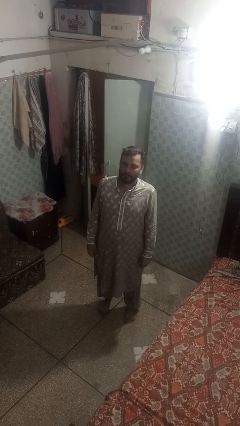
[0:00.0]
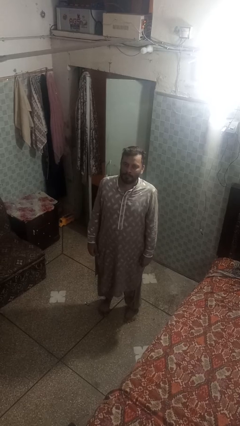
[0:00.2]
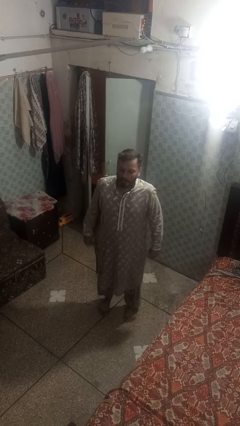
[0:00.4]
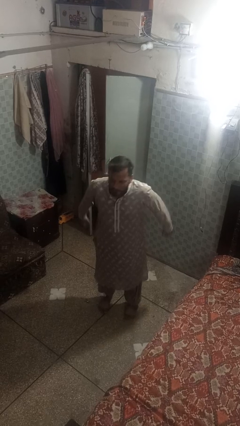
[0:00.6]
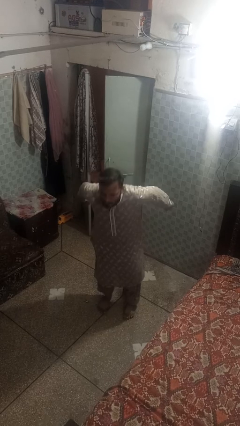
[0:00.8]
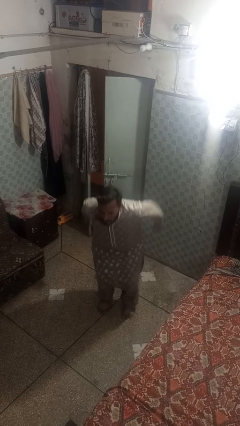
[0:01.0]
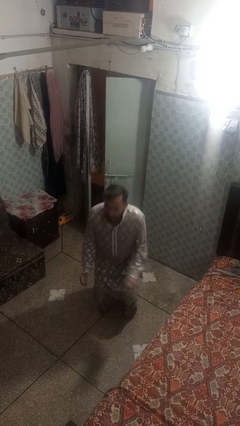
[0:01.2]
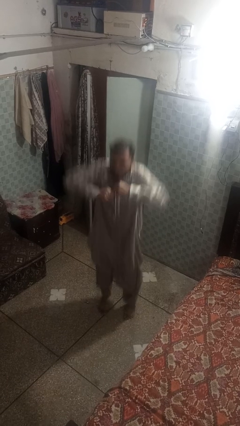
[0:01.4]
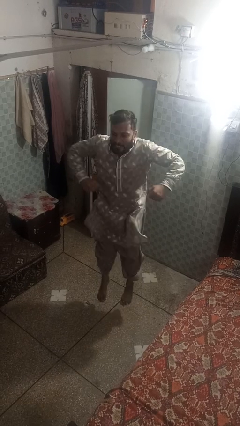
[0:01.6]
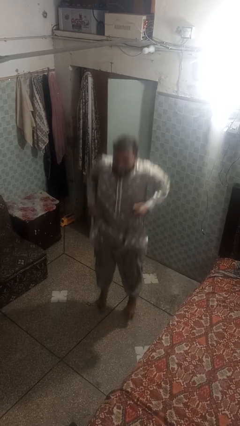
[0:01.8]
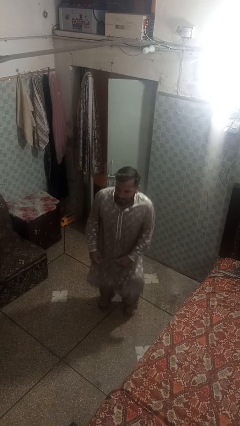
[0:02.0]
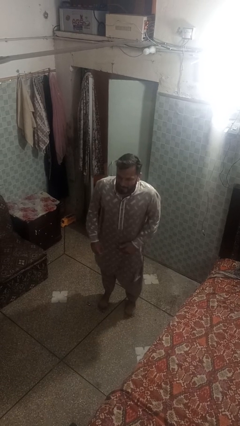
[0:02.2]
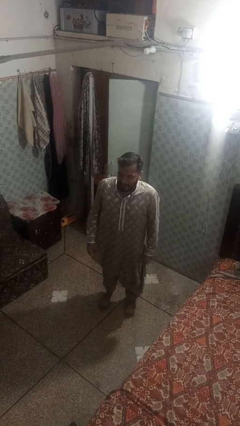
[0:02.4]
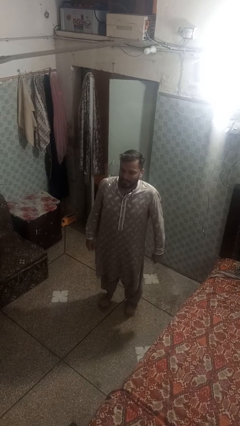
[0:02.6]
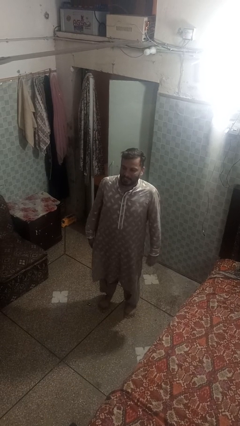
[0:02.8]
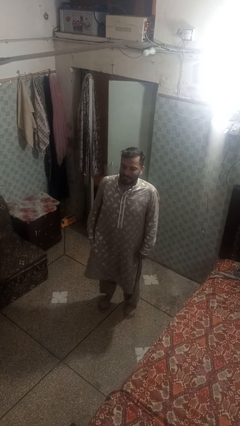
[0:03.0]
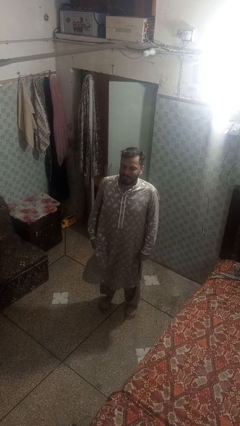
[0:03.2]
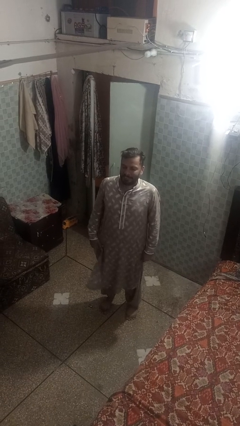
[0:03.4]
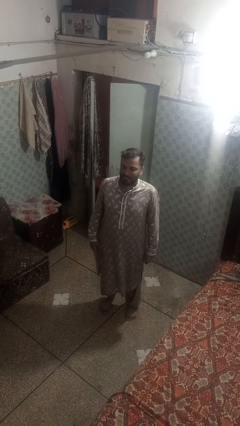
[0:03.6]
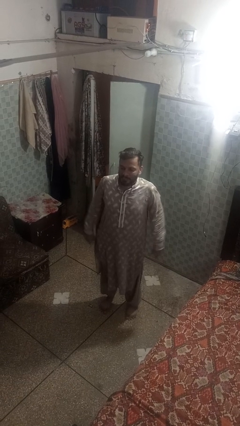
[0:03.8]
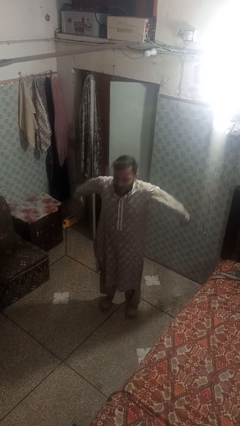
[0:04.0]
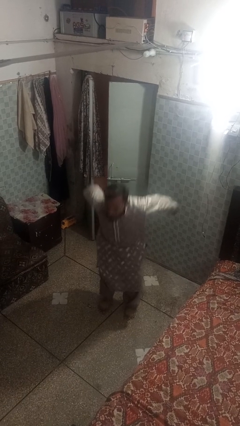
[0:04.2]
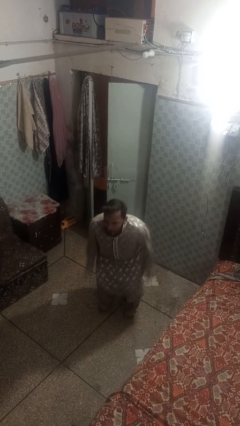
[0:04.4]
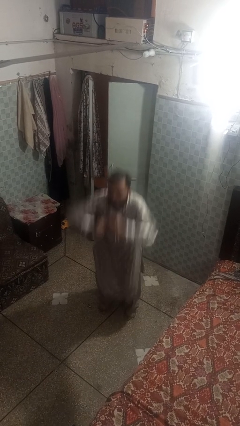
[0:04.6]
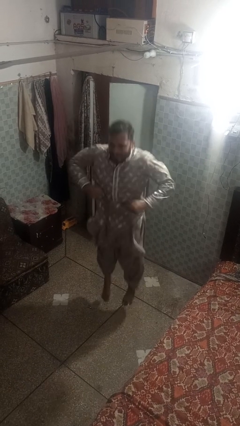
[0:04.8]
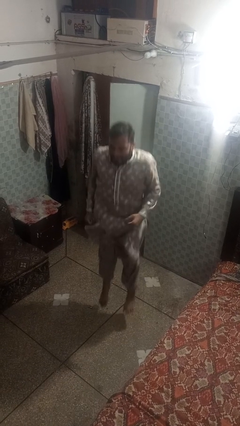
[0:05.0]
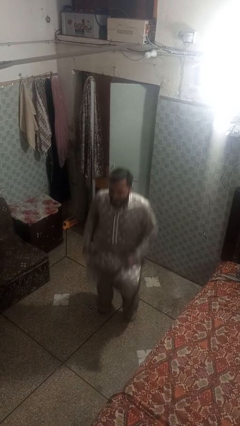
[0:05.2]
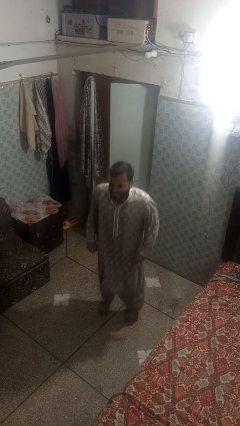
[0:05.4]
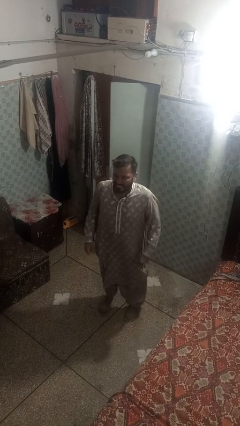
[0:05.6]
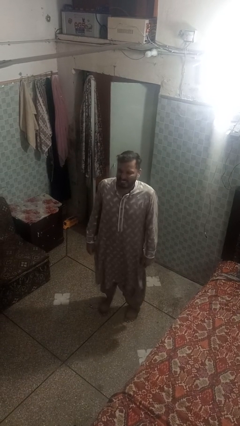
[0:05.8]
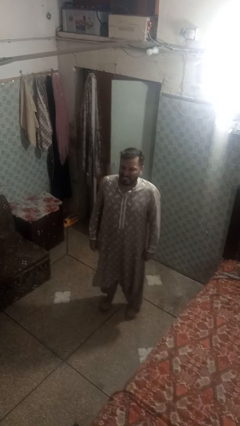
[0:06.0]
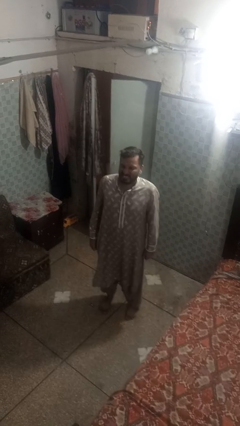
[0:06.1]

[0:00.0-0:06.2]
person jumps

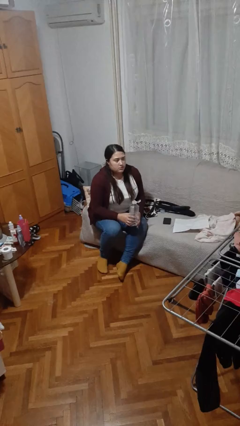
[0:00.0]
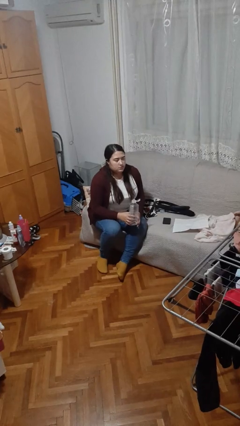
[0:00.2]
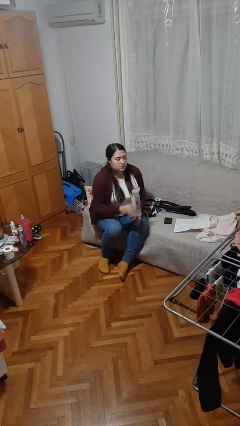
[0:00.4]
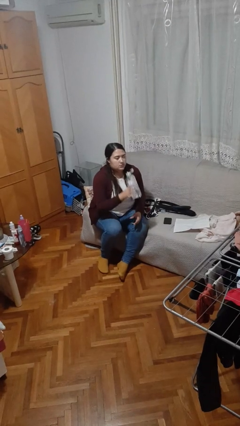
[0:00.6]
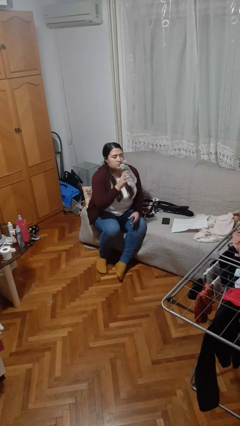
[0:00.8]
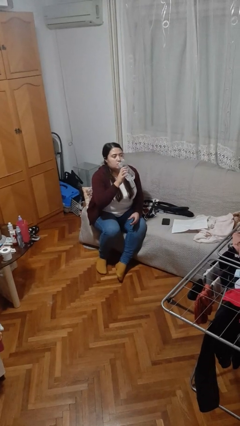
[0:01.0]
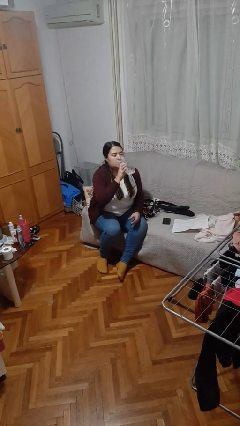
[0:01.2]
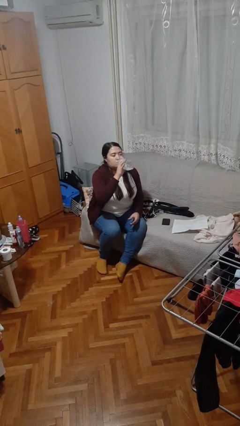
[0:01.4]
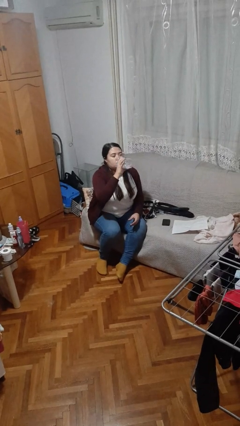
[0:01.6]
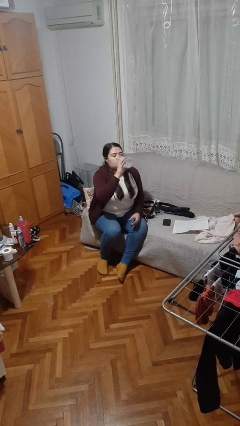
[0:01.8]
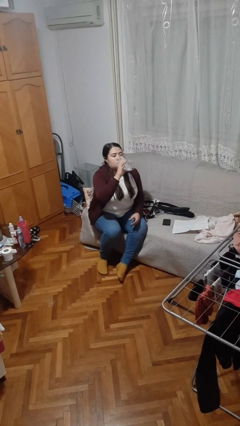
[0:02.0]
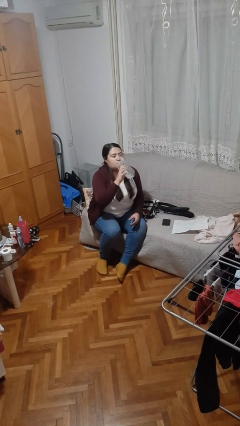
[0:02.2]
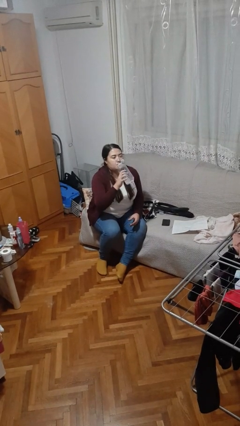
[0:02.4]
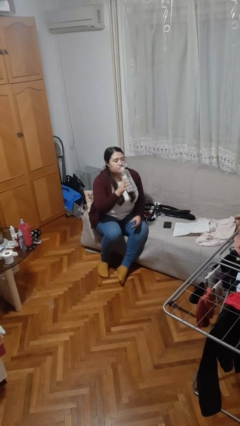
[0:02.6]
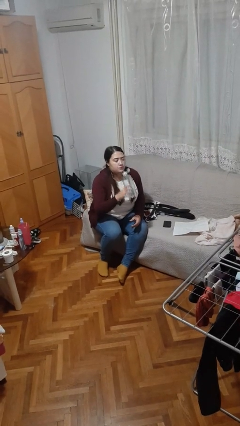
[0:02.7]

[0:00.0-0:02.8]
person drinks from bottle

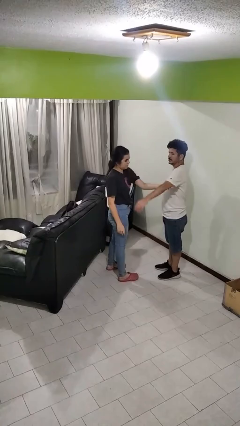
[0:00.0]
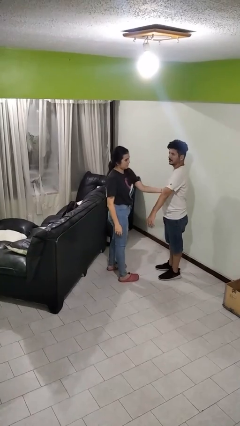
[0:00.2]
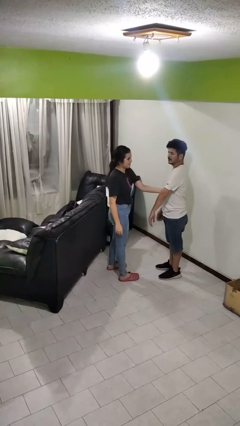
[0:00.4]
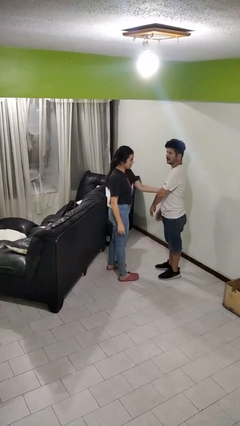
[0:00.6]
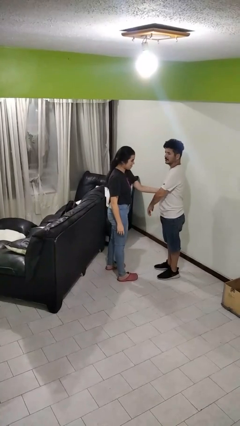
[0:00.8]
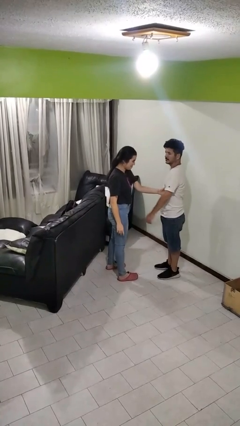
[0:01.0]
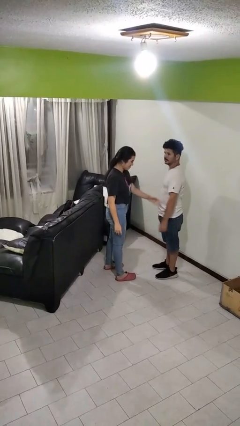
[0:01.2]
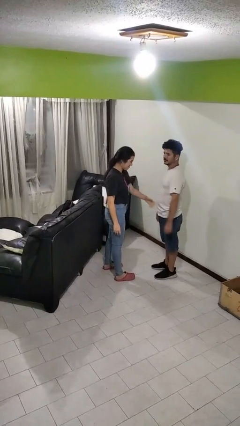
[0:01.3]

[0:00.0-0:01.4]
person grabs person by bicep

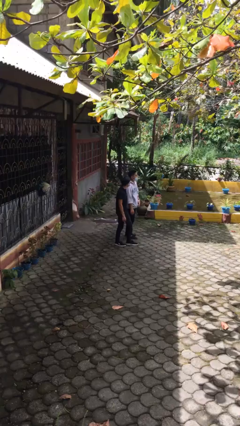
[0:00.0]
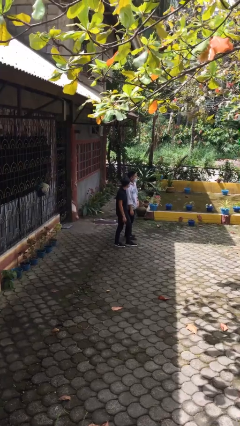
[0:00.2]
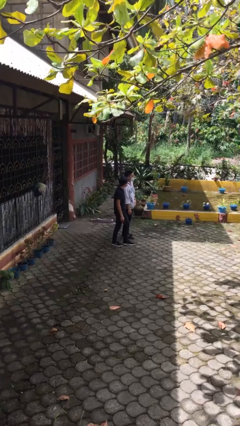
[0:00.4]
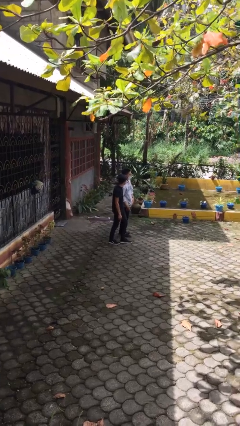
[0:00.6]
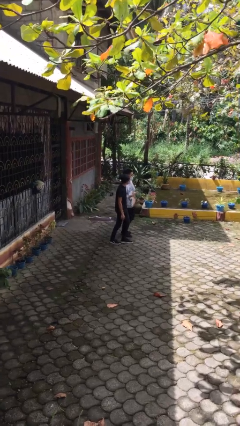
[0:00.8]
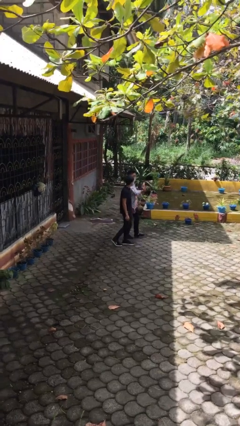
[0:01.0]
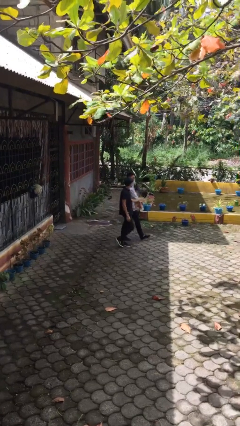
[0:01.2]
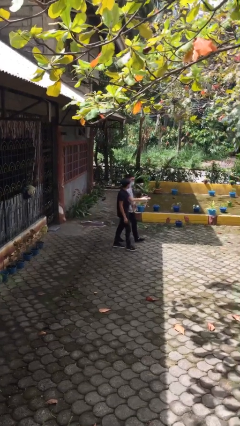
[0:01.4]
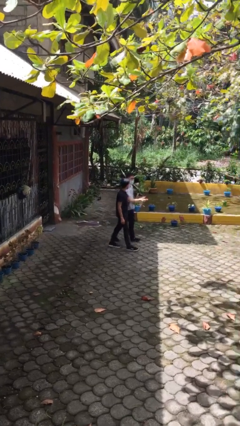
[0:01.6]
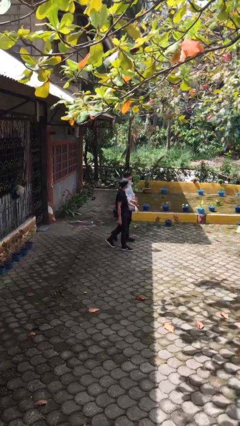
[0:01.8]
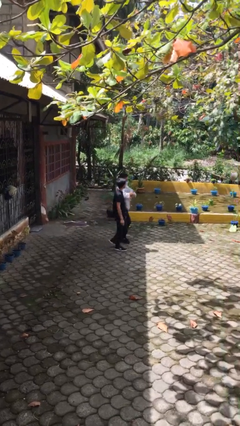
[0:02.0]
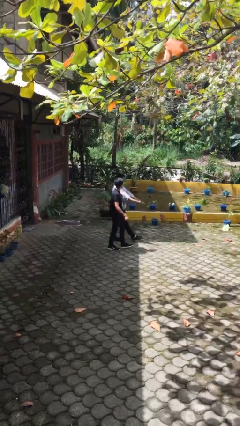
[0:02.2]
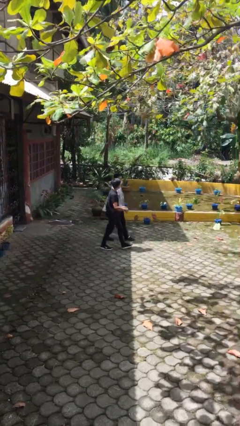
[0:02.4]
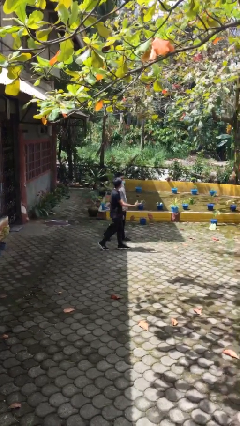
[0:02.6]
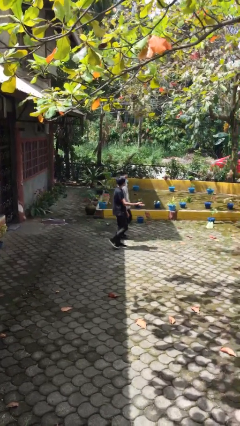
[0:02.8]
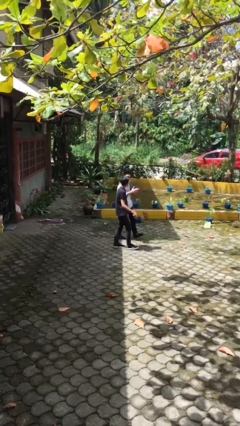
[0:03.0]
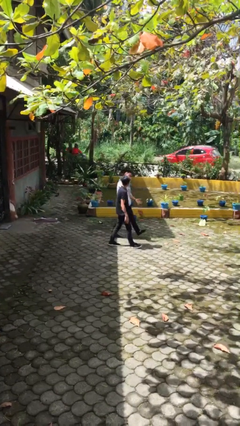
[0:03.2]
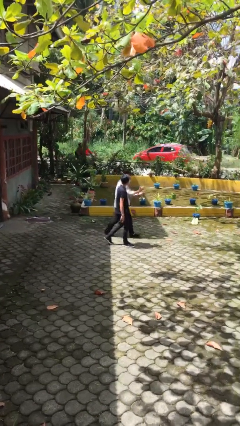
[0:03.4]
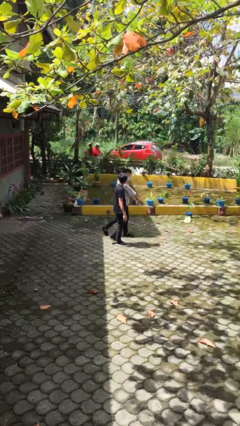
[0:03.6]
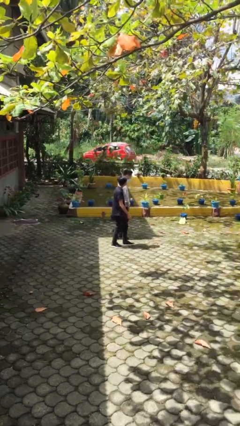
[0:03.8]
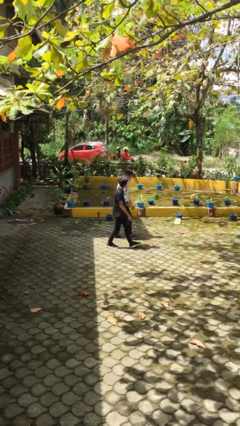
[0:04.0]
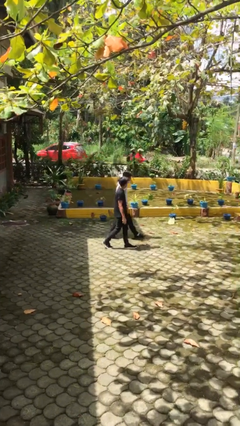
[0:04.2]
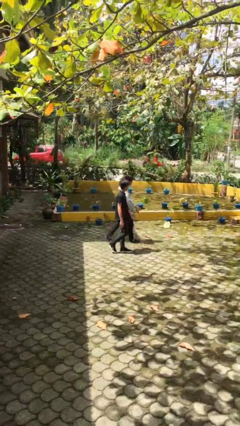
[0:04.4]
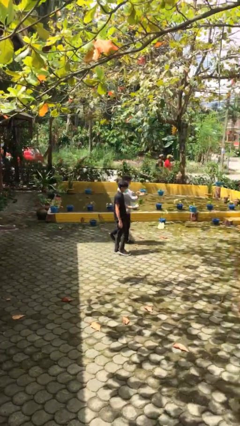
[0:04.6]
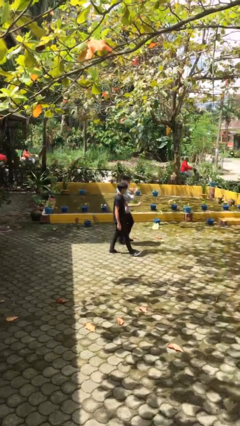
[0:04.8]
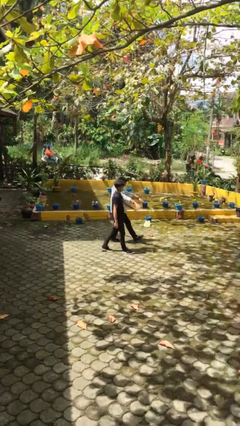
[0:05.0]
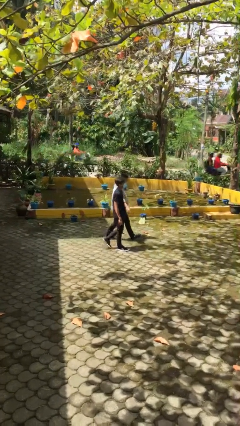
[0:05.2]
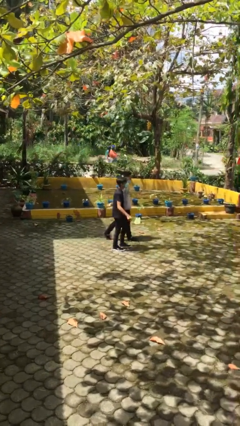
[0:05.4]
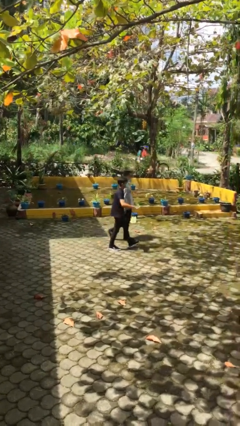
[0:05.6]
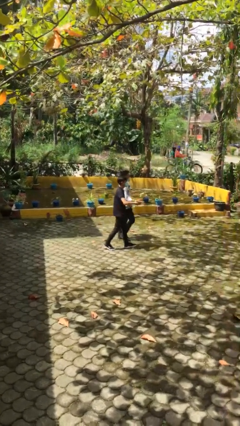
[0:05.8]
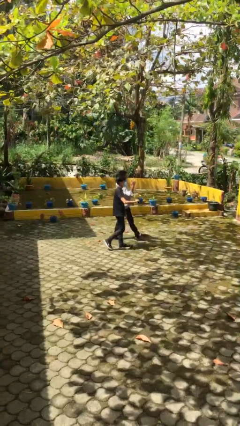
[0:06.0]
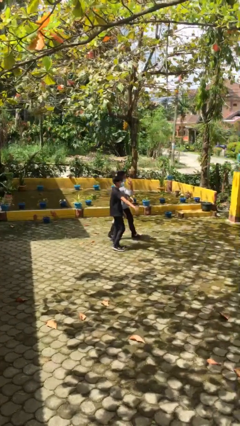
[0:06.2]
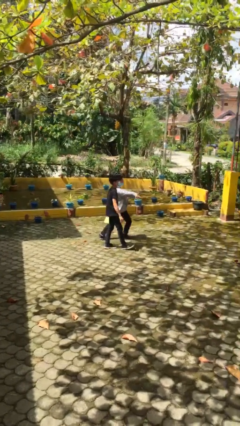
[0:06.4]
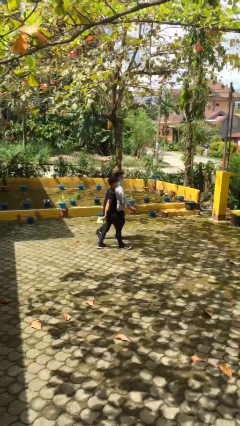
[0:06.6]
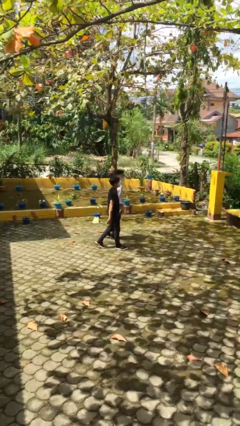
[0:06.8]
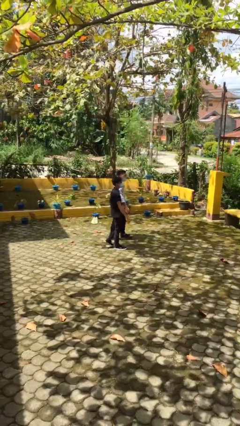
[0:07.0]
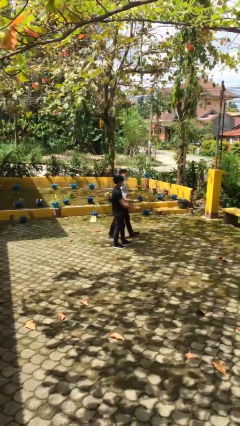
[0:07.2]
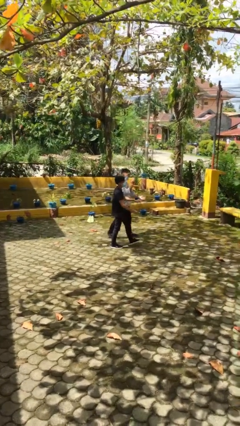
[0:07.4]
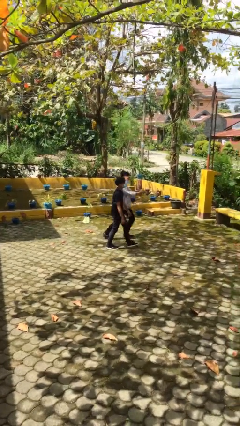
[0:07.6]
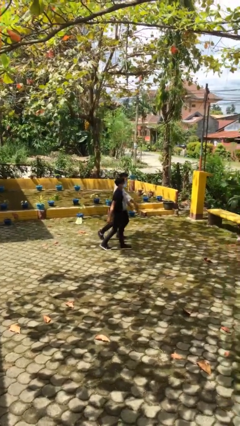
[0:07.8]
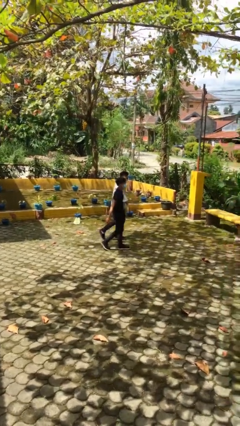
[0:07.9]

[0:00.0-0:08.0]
person talks to person
